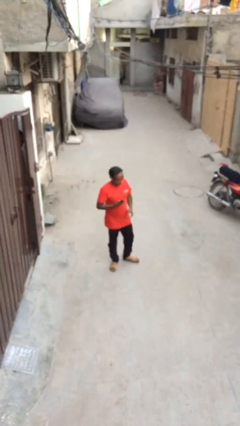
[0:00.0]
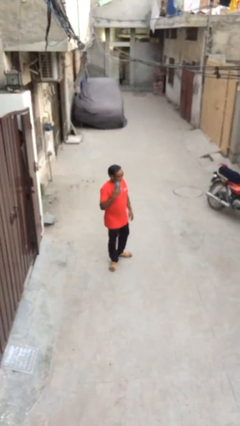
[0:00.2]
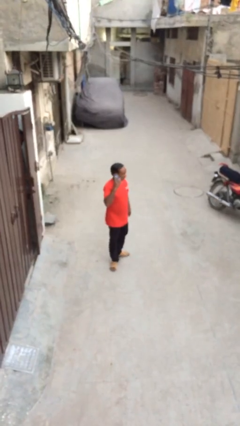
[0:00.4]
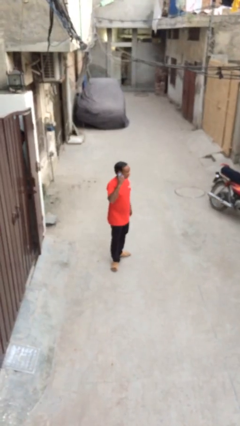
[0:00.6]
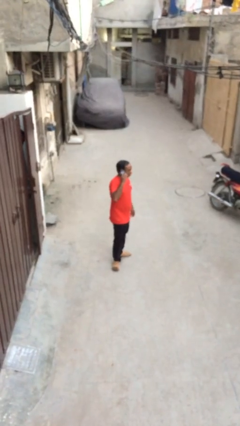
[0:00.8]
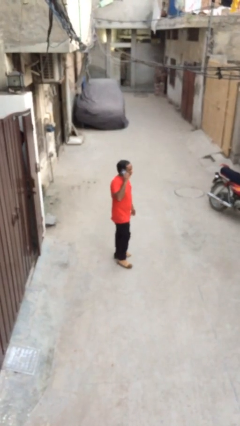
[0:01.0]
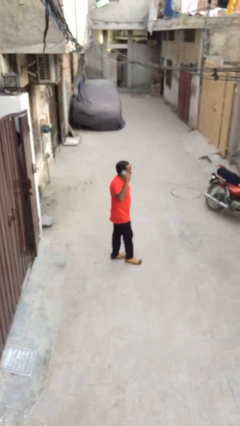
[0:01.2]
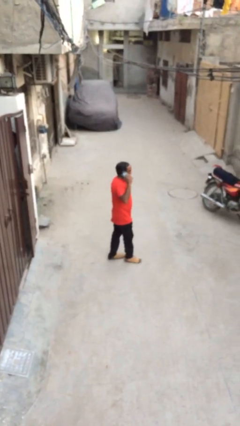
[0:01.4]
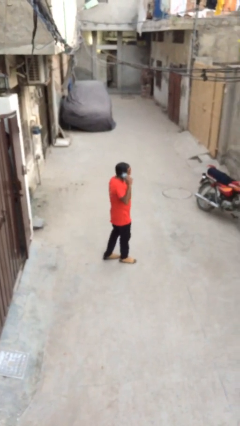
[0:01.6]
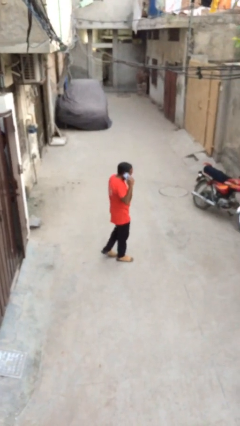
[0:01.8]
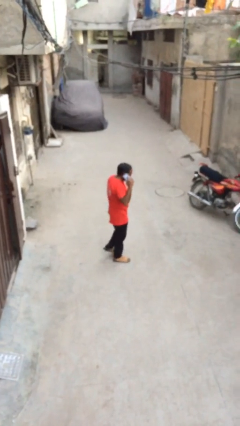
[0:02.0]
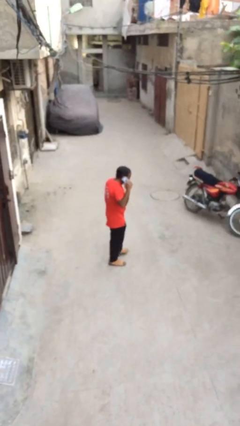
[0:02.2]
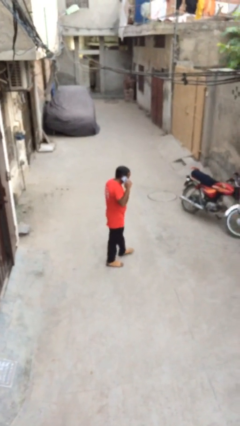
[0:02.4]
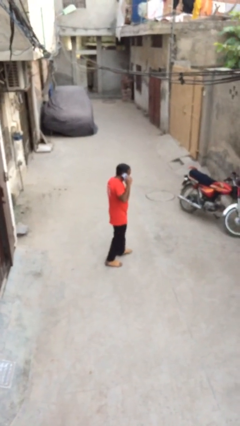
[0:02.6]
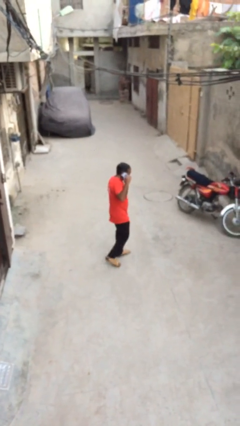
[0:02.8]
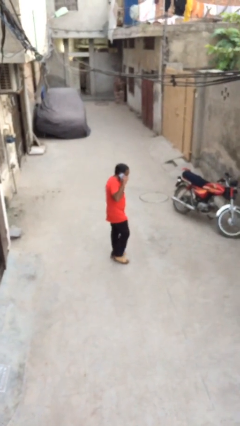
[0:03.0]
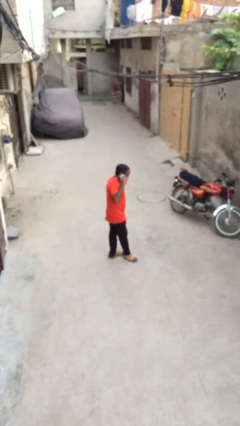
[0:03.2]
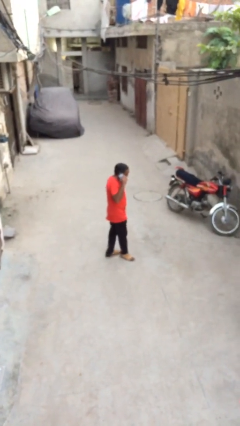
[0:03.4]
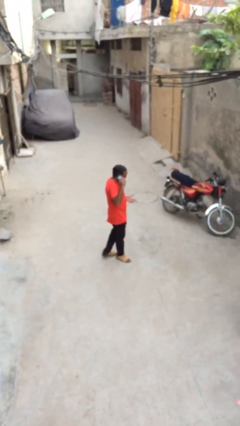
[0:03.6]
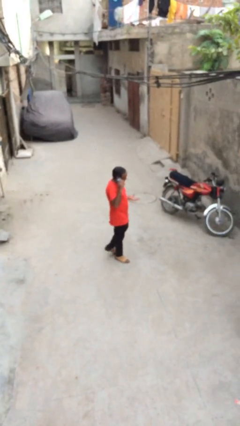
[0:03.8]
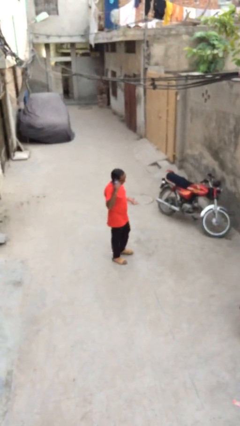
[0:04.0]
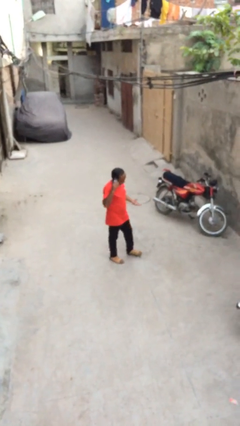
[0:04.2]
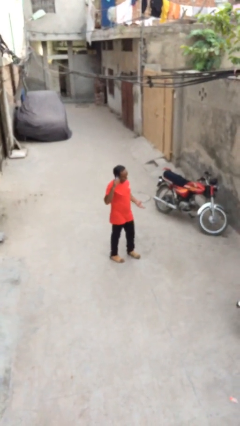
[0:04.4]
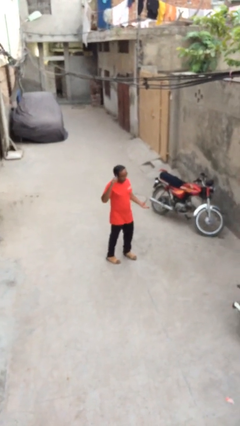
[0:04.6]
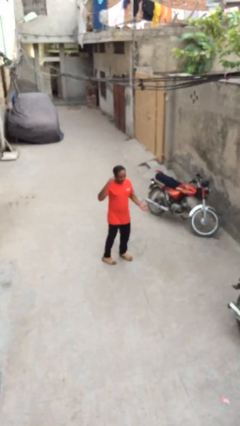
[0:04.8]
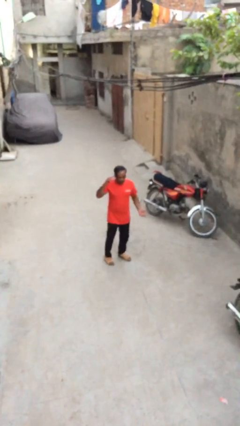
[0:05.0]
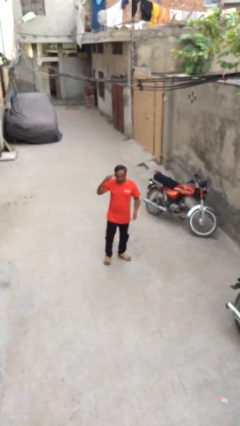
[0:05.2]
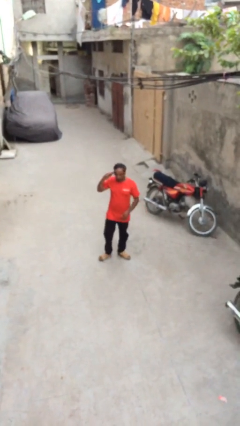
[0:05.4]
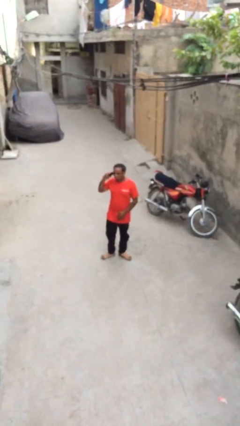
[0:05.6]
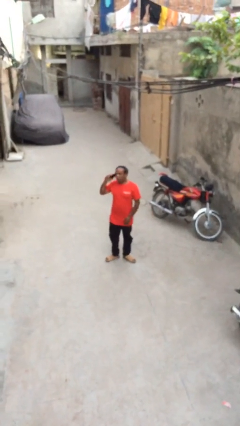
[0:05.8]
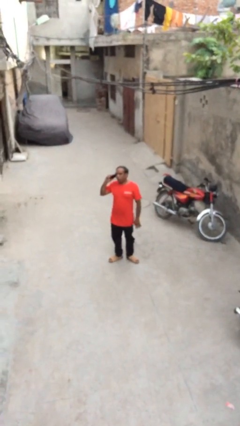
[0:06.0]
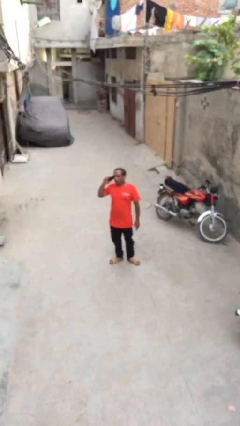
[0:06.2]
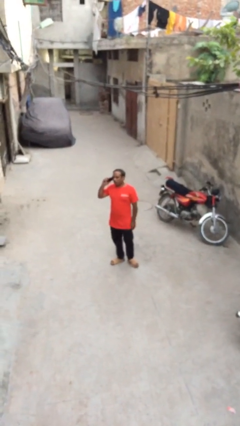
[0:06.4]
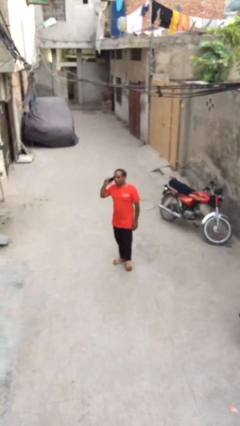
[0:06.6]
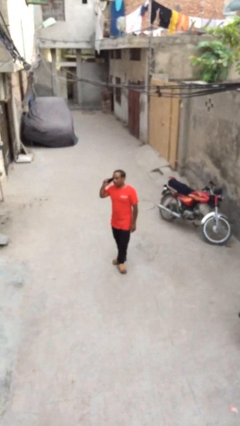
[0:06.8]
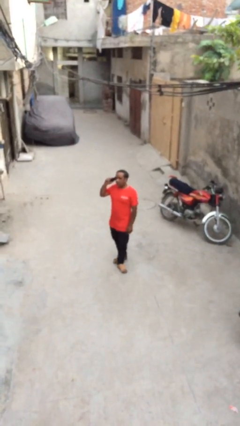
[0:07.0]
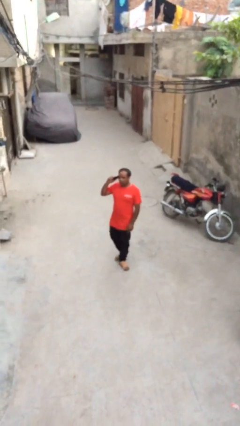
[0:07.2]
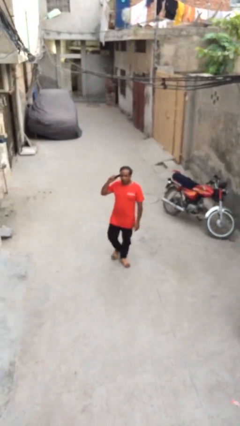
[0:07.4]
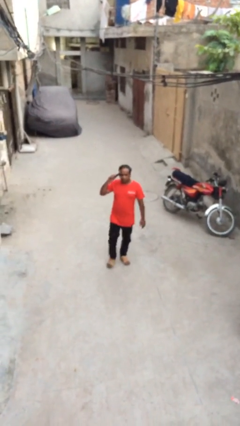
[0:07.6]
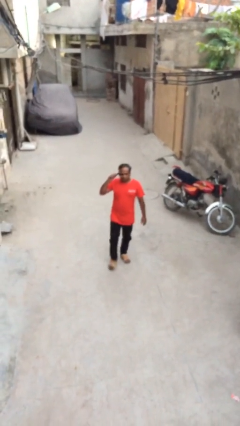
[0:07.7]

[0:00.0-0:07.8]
person talks on phone

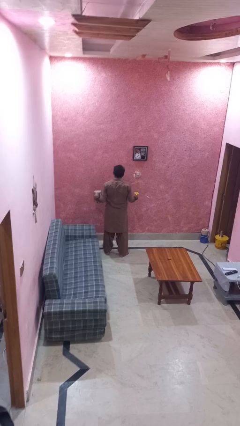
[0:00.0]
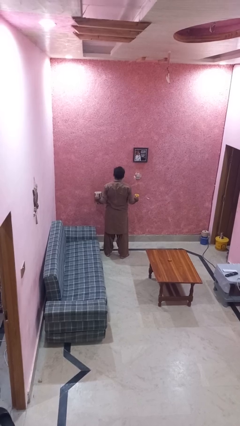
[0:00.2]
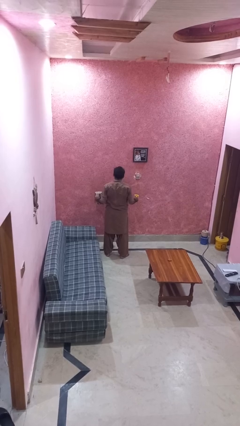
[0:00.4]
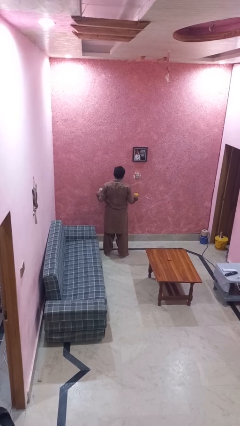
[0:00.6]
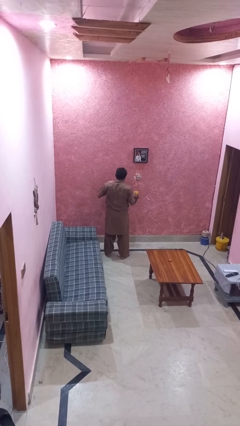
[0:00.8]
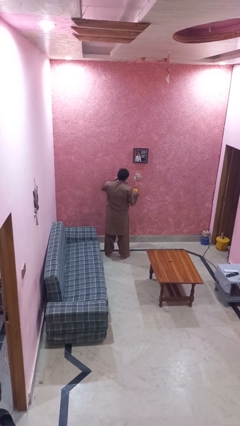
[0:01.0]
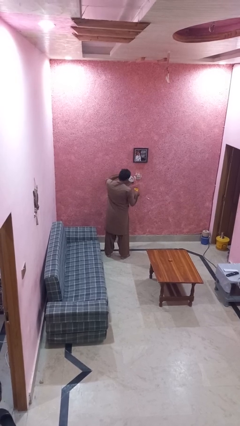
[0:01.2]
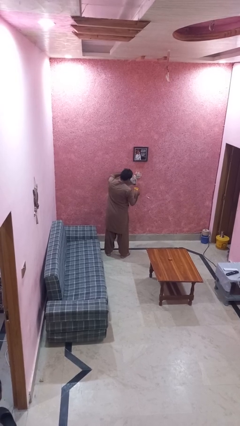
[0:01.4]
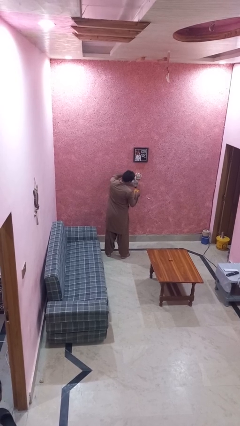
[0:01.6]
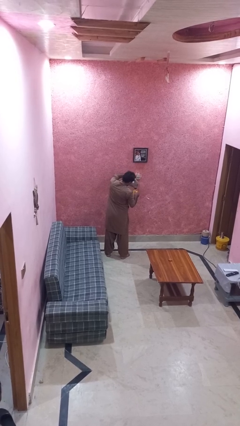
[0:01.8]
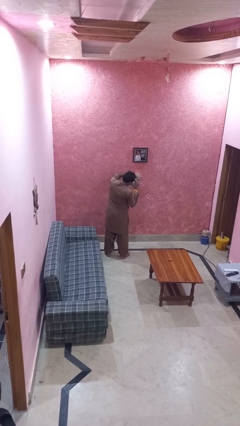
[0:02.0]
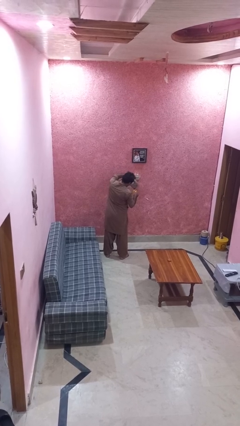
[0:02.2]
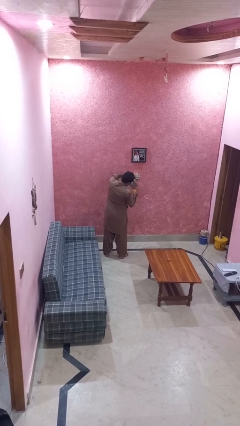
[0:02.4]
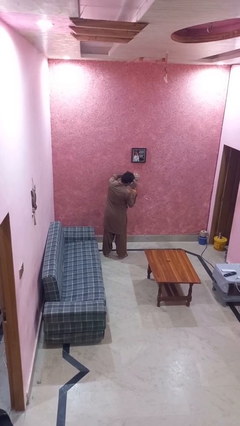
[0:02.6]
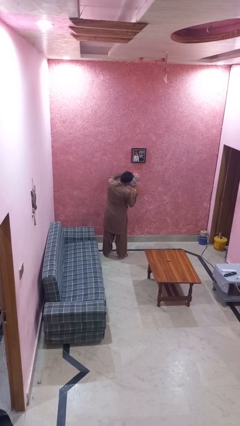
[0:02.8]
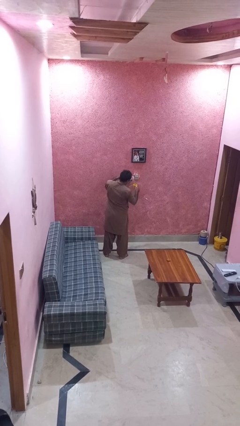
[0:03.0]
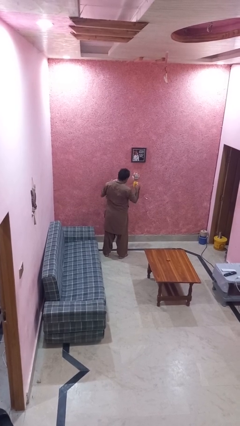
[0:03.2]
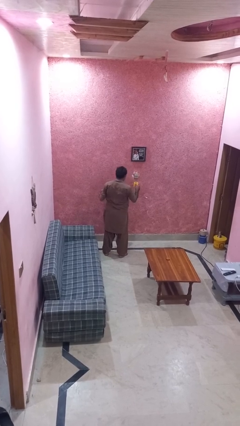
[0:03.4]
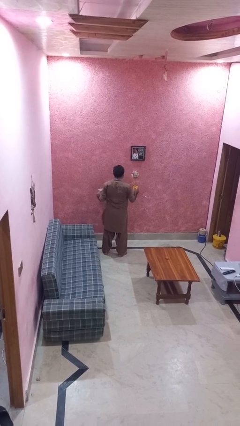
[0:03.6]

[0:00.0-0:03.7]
person pours coffee into mug

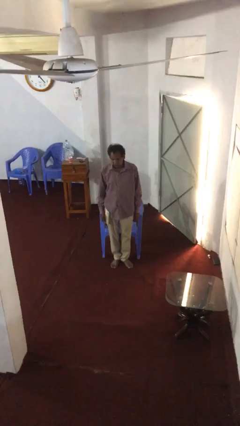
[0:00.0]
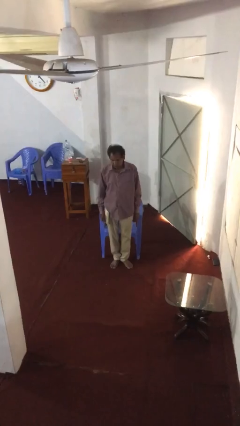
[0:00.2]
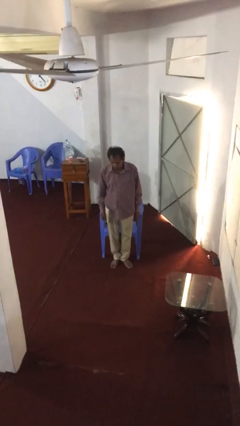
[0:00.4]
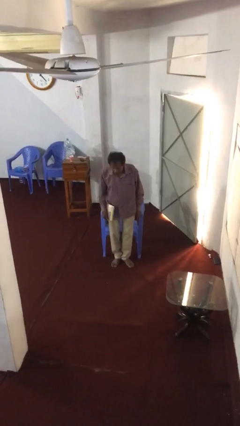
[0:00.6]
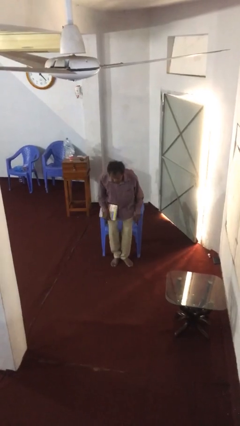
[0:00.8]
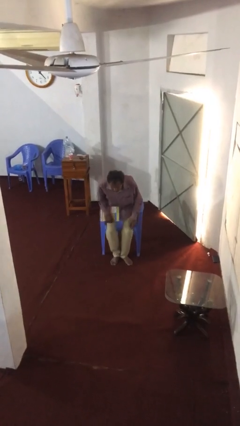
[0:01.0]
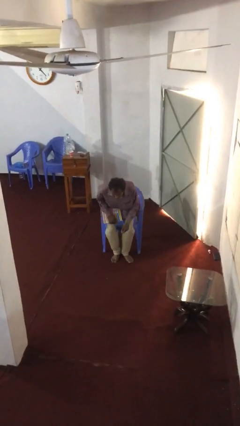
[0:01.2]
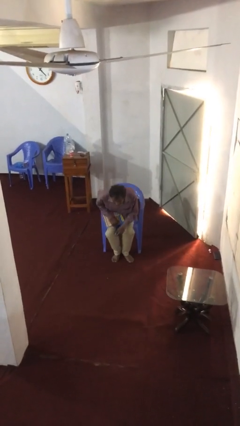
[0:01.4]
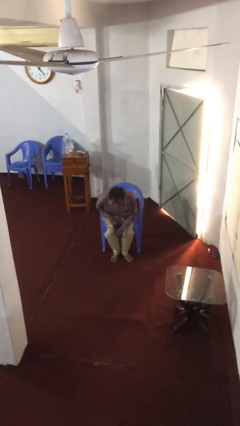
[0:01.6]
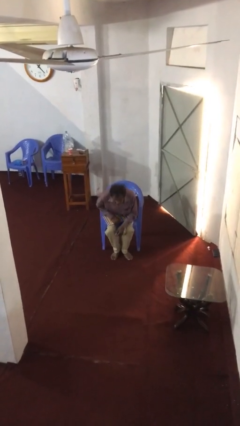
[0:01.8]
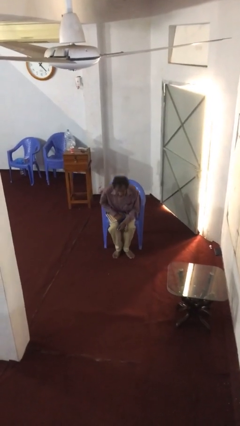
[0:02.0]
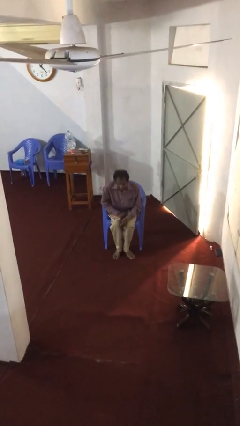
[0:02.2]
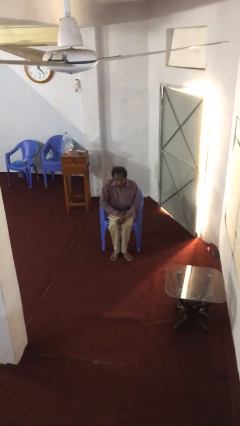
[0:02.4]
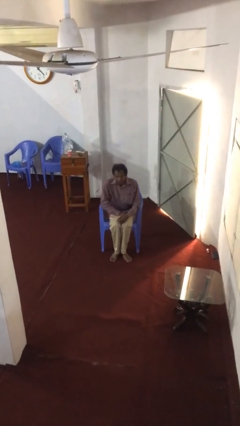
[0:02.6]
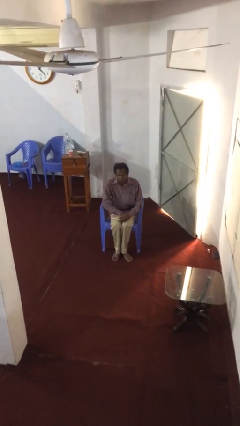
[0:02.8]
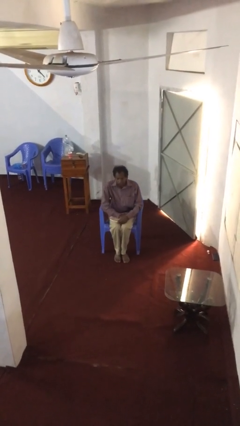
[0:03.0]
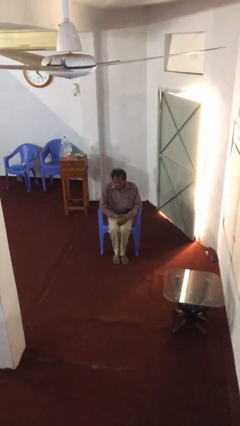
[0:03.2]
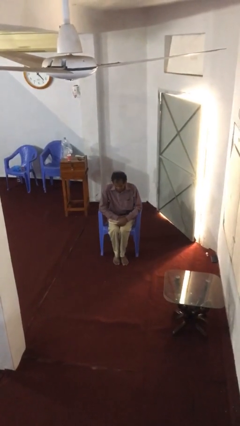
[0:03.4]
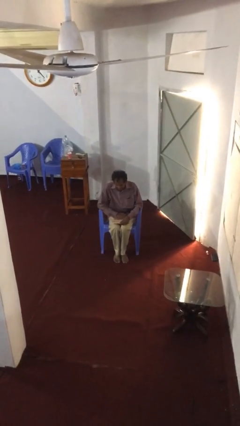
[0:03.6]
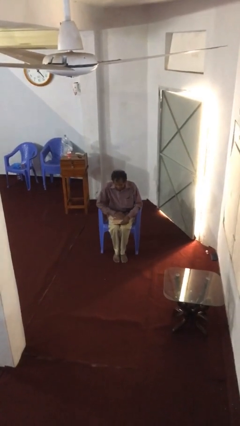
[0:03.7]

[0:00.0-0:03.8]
person sits down

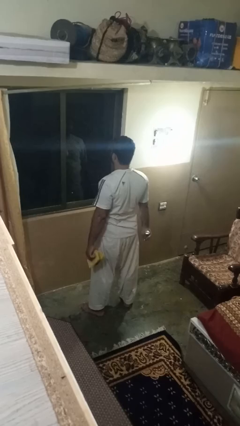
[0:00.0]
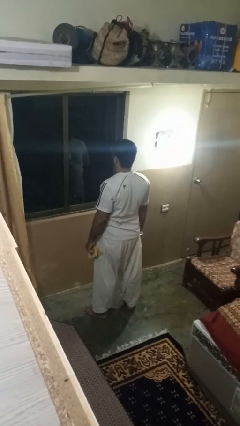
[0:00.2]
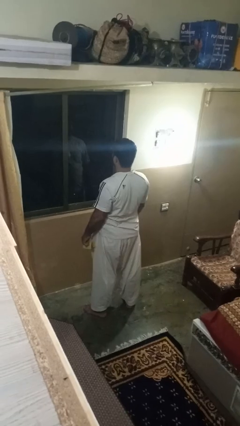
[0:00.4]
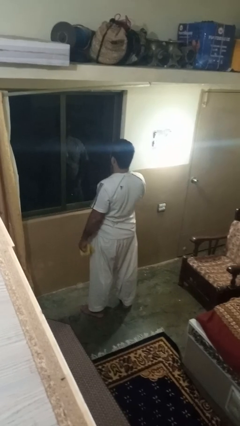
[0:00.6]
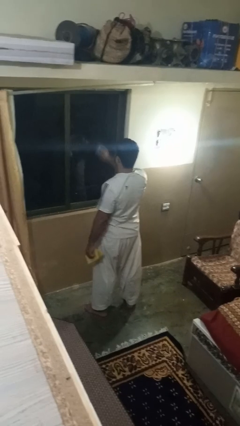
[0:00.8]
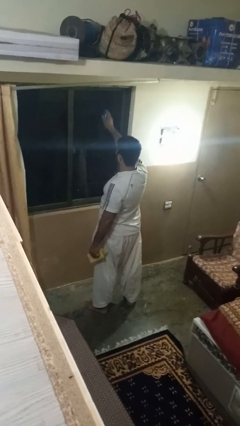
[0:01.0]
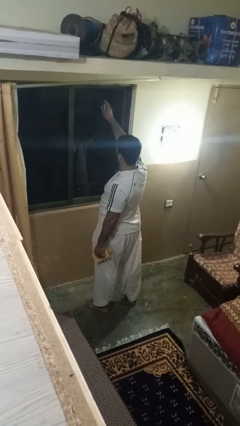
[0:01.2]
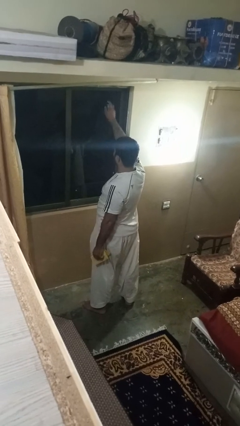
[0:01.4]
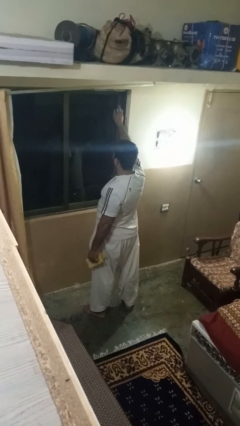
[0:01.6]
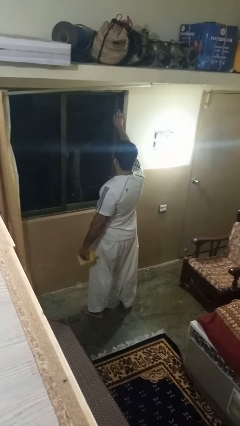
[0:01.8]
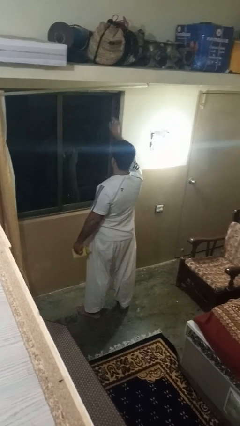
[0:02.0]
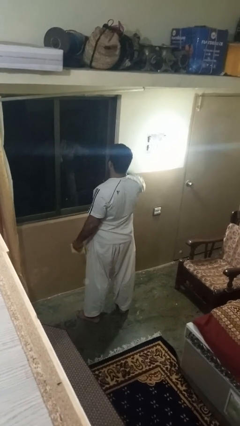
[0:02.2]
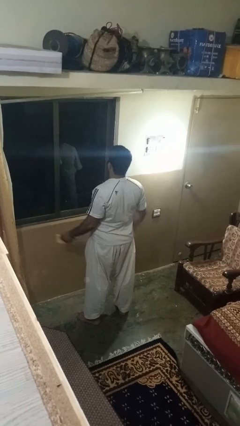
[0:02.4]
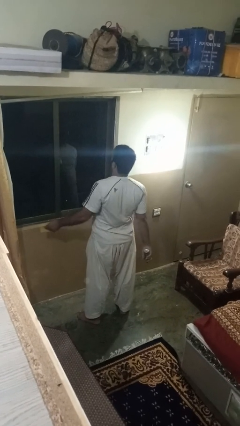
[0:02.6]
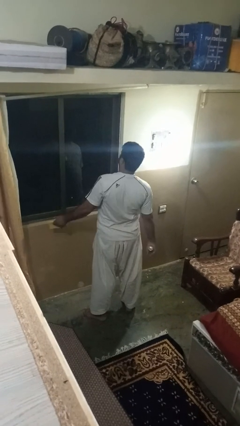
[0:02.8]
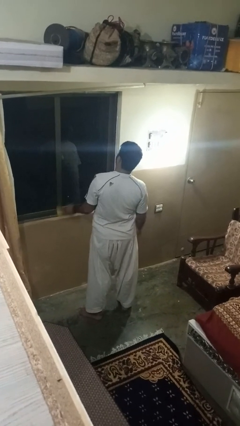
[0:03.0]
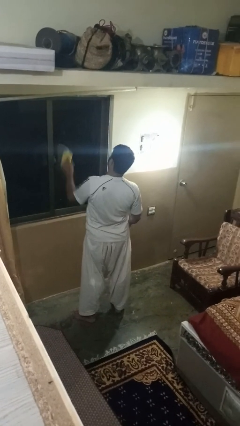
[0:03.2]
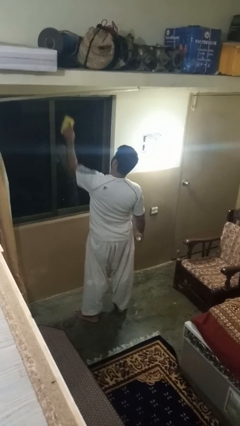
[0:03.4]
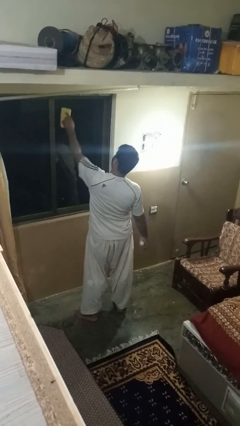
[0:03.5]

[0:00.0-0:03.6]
person sprays from bottle
